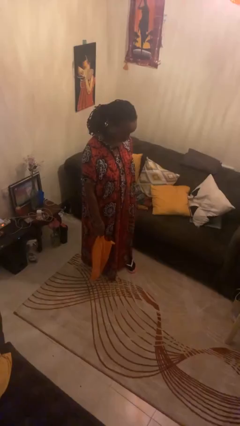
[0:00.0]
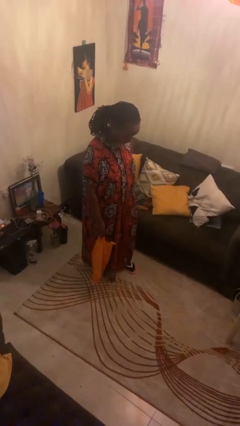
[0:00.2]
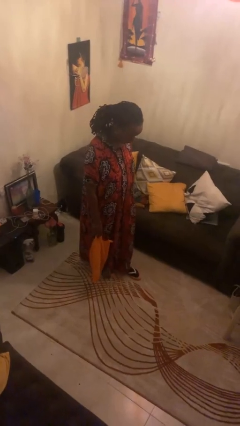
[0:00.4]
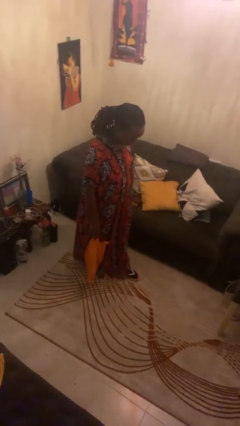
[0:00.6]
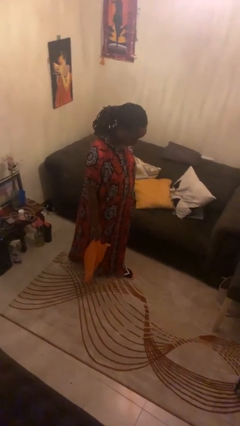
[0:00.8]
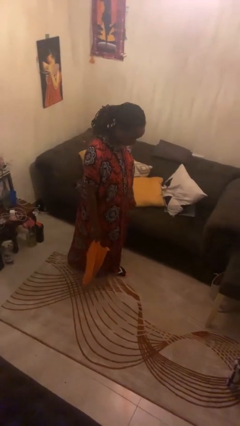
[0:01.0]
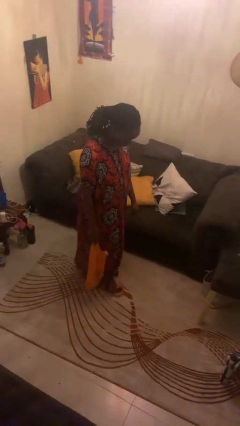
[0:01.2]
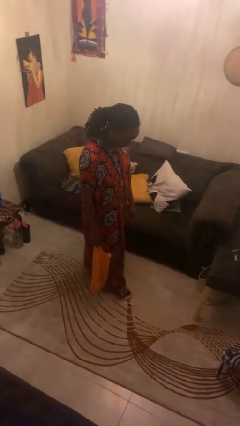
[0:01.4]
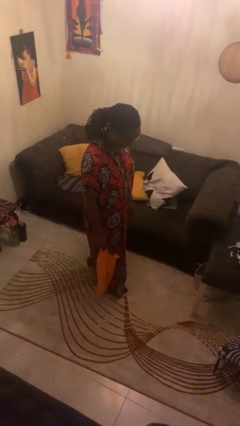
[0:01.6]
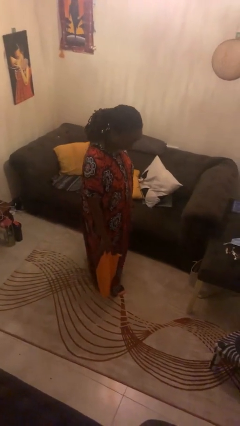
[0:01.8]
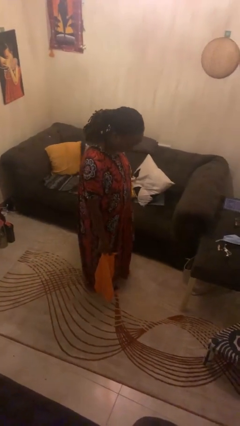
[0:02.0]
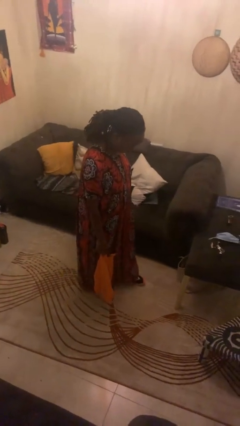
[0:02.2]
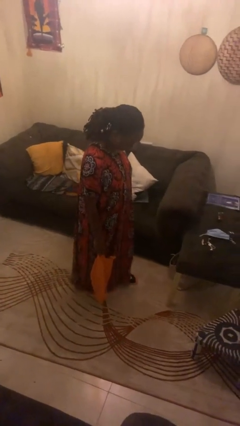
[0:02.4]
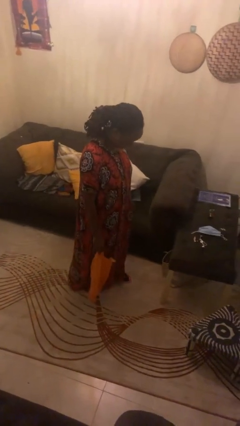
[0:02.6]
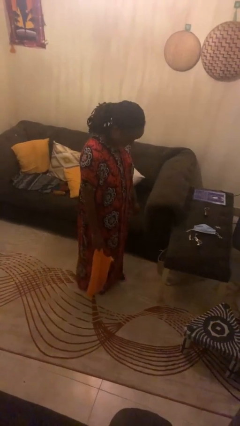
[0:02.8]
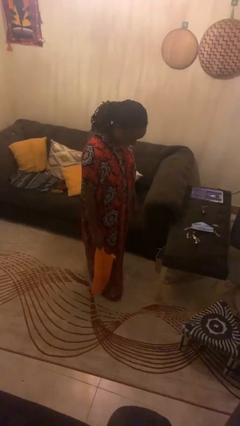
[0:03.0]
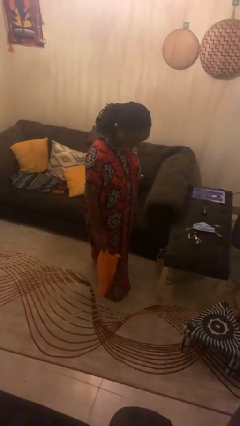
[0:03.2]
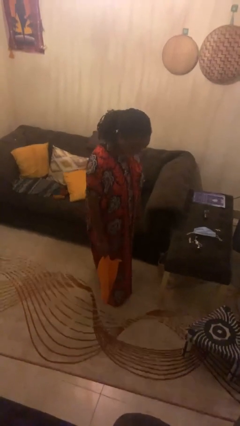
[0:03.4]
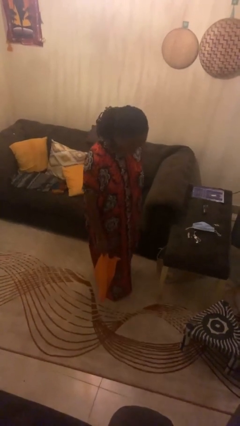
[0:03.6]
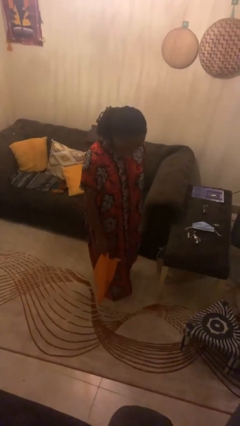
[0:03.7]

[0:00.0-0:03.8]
person carries groceries

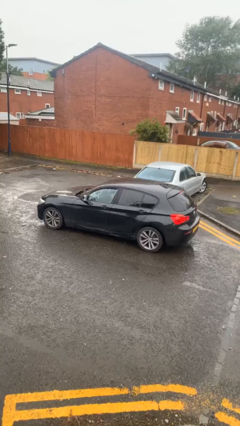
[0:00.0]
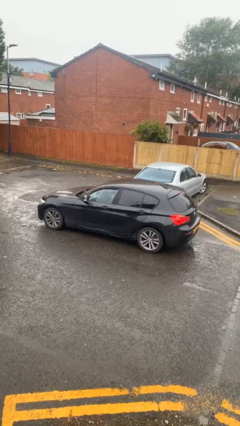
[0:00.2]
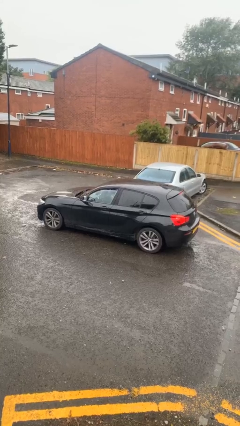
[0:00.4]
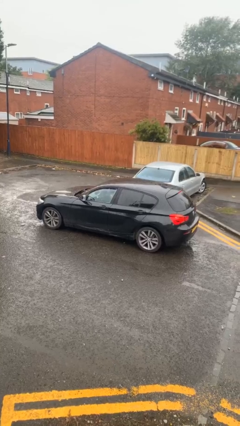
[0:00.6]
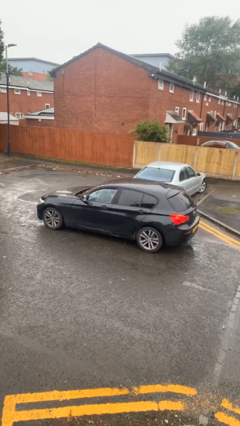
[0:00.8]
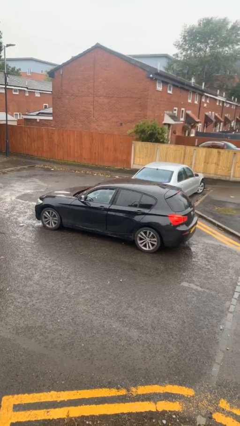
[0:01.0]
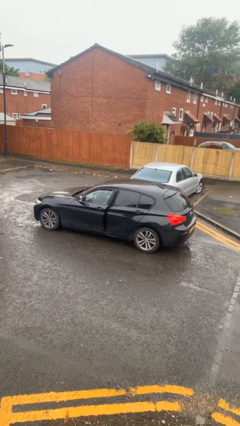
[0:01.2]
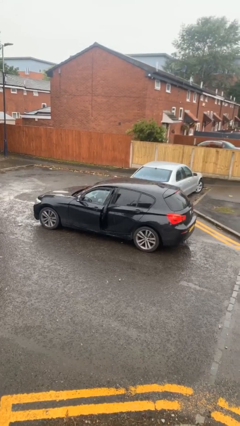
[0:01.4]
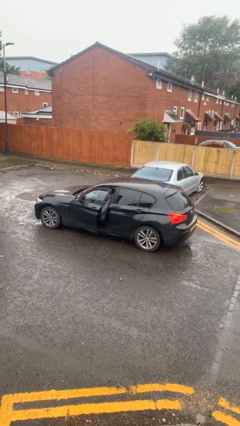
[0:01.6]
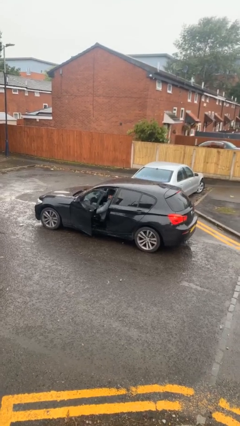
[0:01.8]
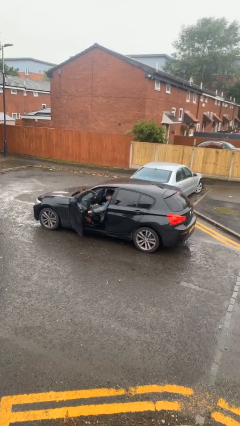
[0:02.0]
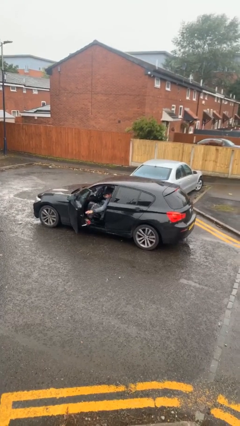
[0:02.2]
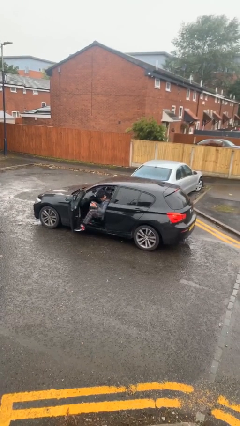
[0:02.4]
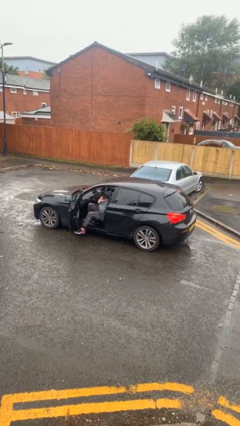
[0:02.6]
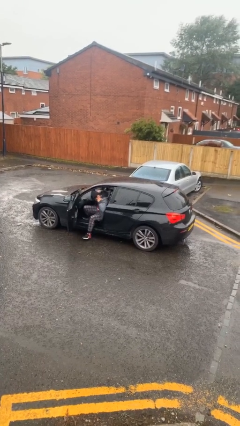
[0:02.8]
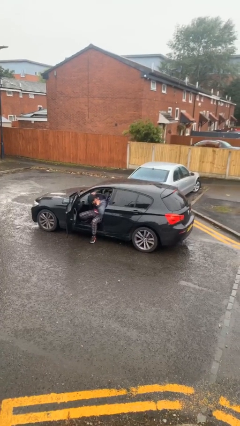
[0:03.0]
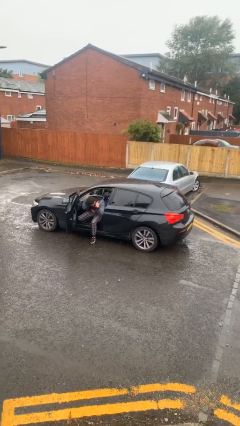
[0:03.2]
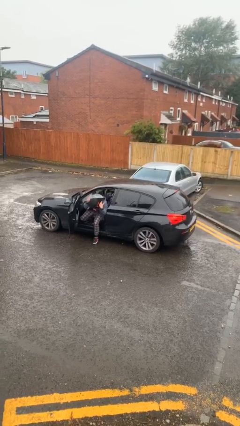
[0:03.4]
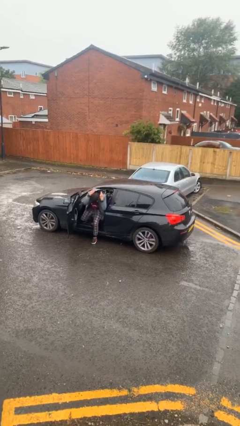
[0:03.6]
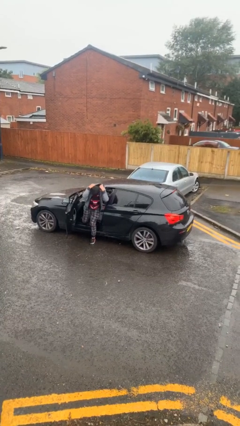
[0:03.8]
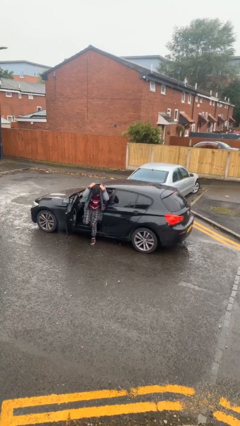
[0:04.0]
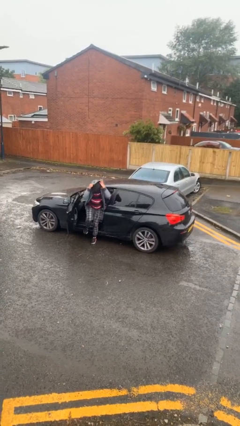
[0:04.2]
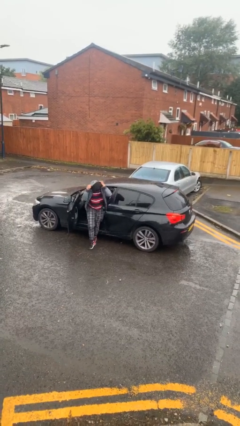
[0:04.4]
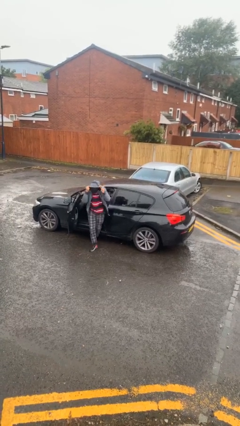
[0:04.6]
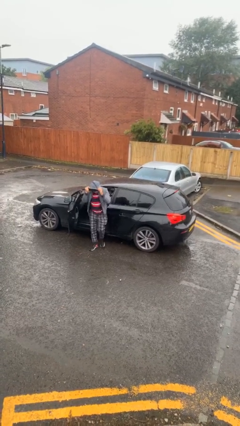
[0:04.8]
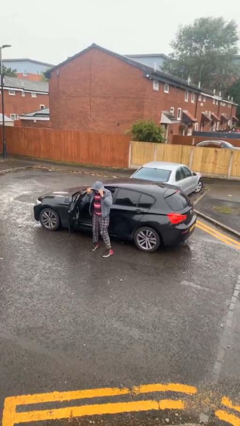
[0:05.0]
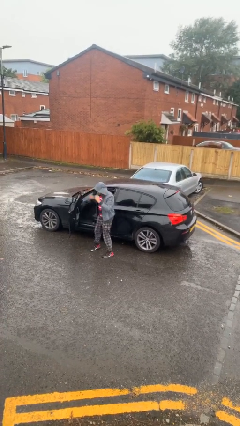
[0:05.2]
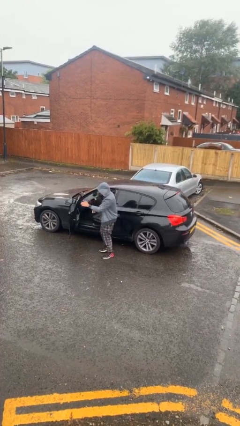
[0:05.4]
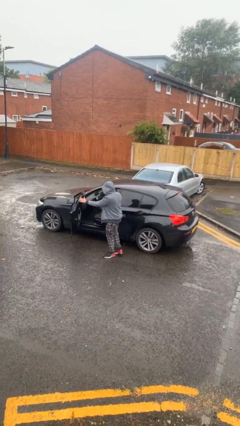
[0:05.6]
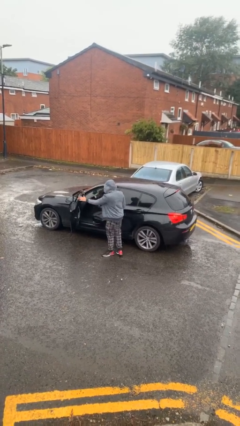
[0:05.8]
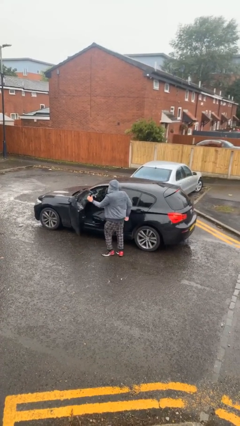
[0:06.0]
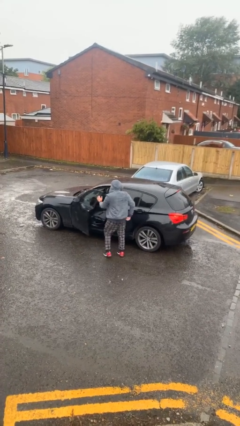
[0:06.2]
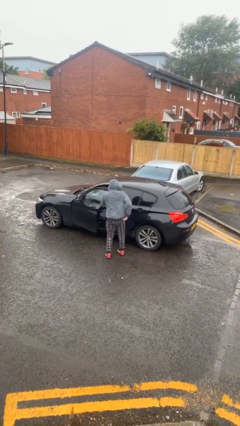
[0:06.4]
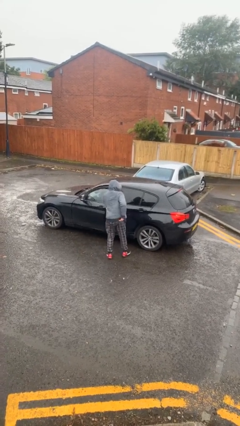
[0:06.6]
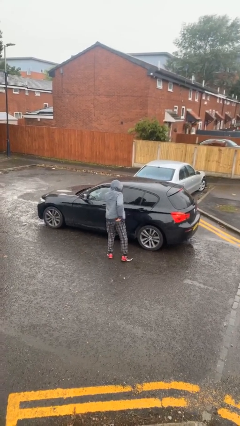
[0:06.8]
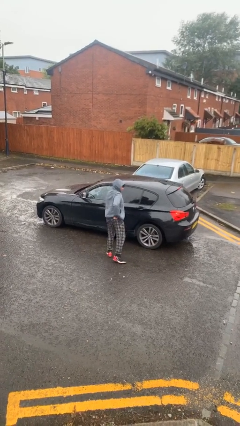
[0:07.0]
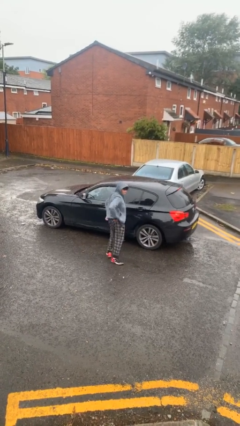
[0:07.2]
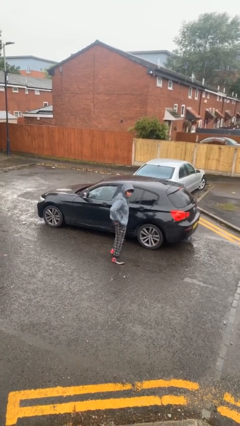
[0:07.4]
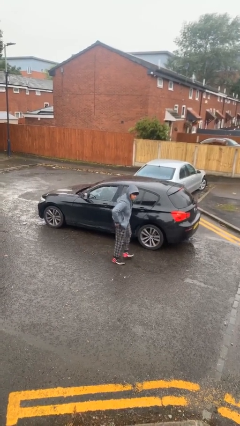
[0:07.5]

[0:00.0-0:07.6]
car drops off person

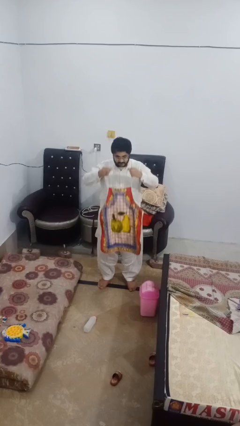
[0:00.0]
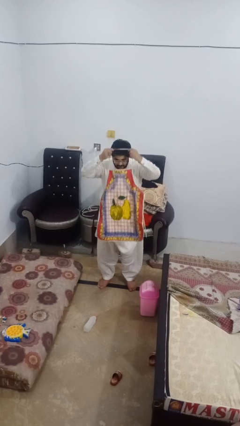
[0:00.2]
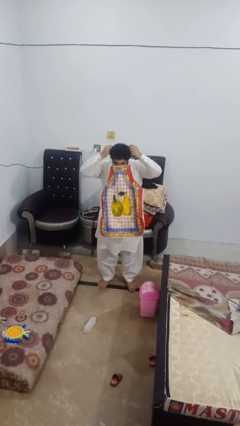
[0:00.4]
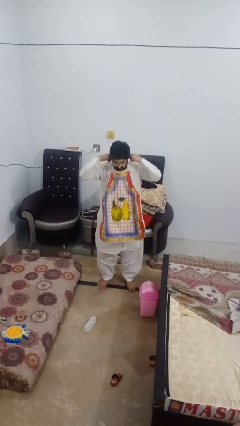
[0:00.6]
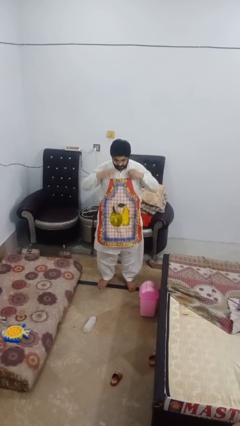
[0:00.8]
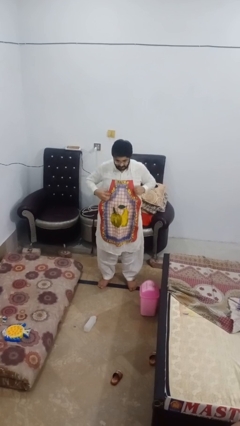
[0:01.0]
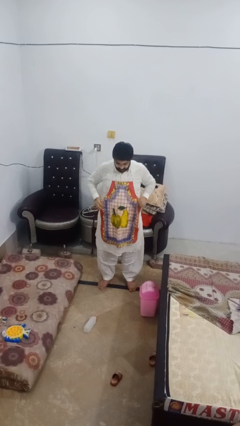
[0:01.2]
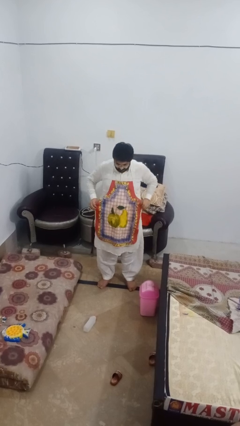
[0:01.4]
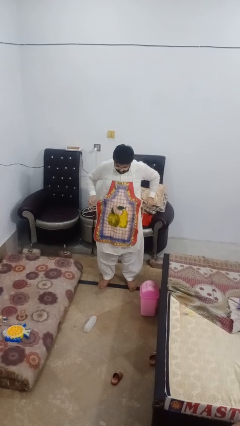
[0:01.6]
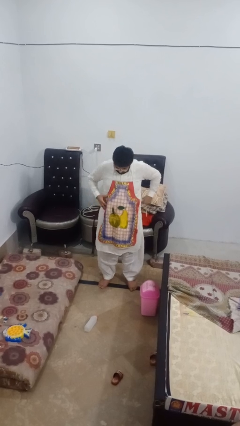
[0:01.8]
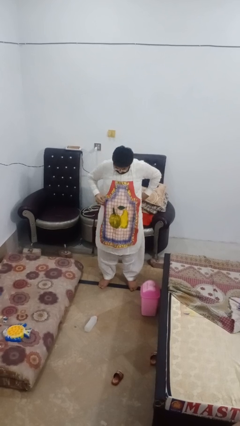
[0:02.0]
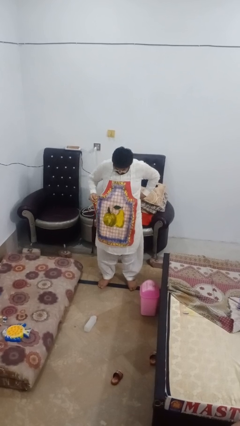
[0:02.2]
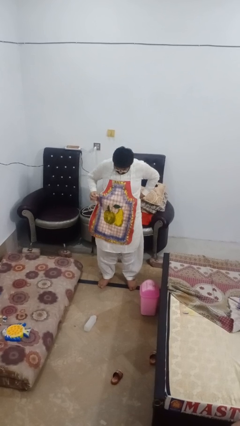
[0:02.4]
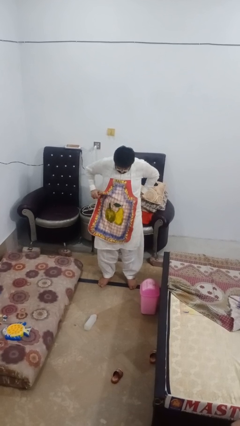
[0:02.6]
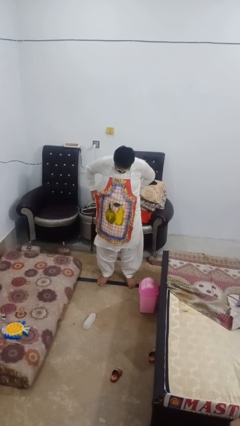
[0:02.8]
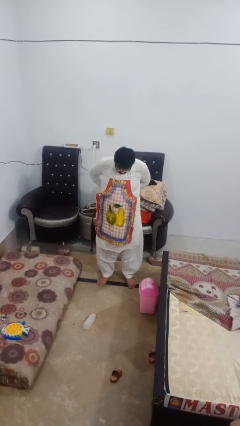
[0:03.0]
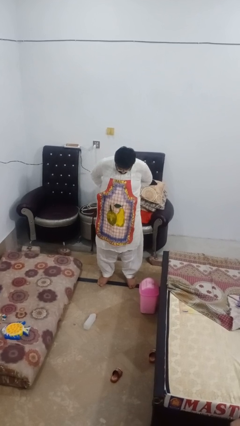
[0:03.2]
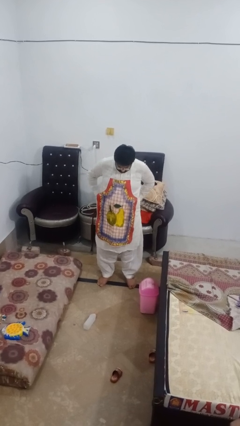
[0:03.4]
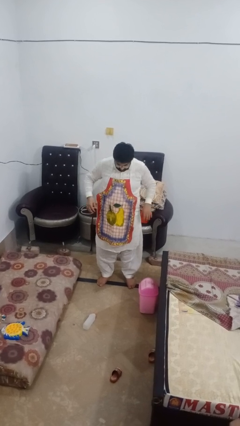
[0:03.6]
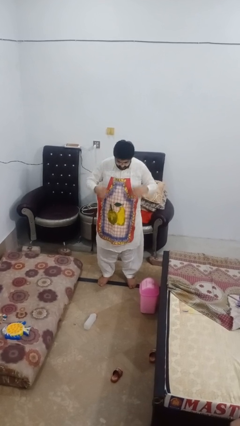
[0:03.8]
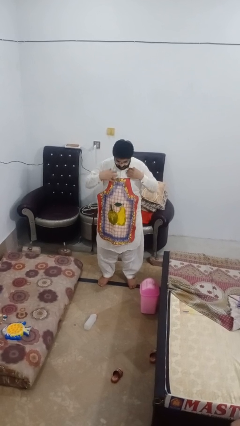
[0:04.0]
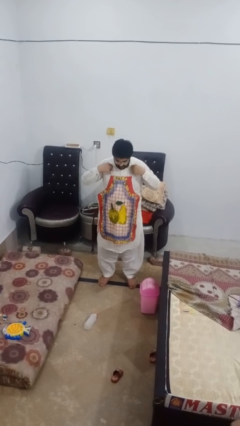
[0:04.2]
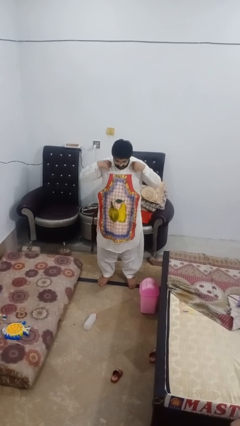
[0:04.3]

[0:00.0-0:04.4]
person puts on apron

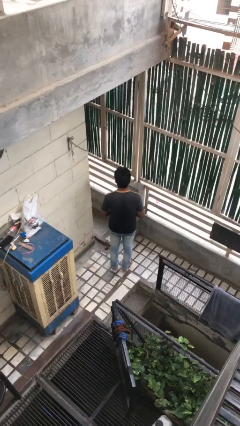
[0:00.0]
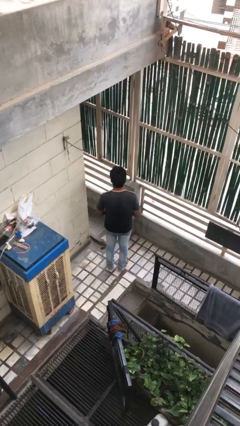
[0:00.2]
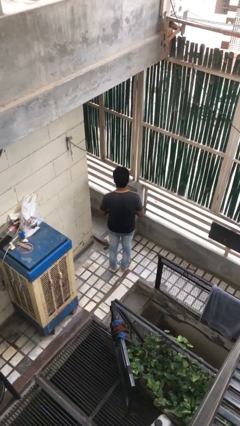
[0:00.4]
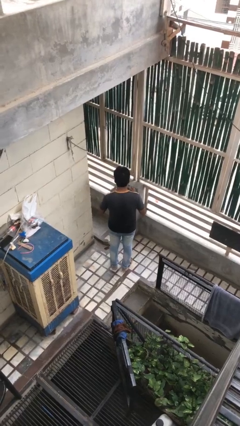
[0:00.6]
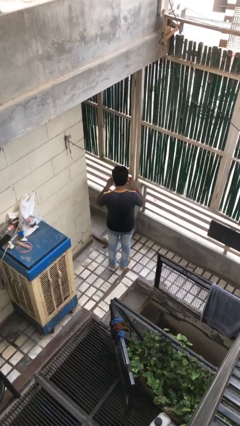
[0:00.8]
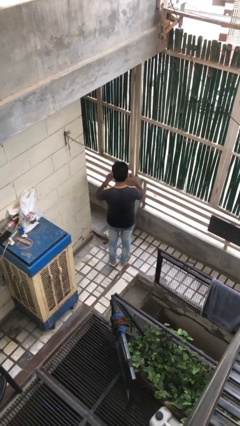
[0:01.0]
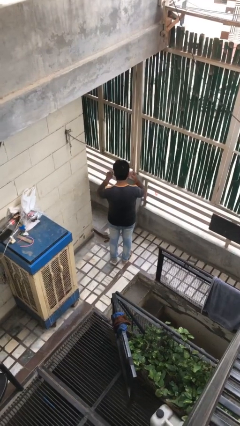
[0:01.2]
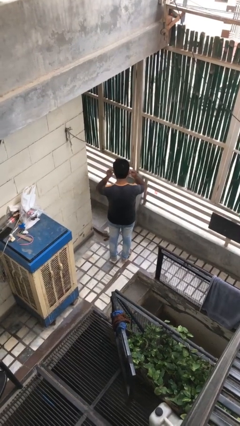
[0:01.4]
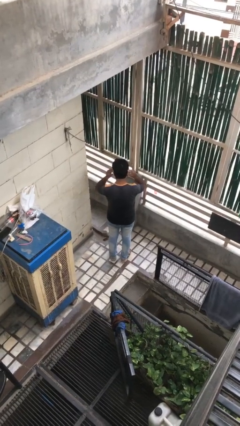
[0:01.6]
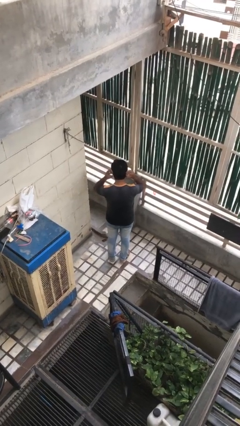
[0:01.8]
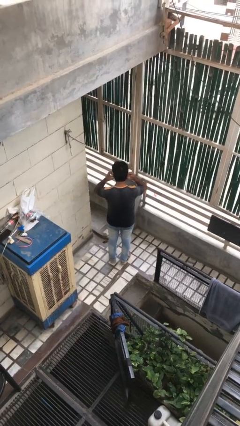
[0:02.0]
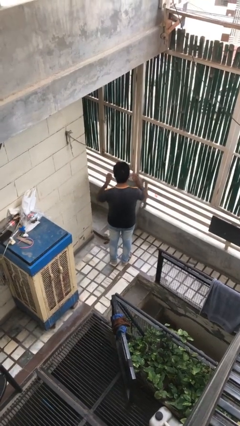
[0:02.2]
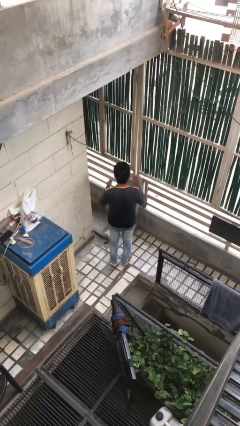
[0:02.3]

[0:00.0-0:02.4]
person puts on facemask
